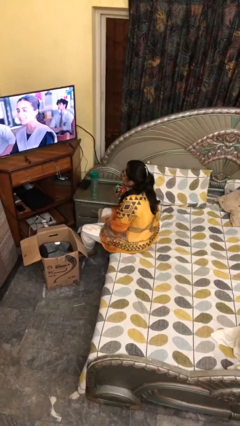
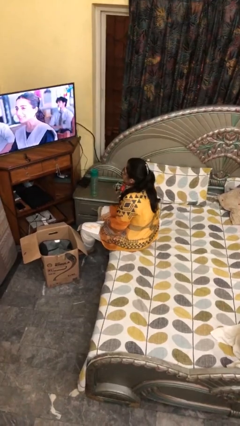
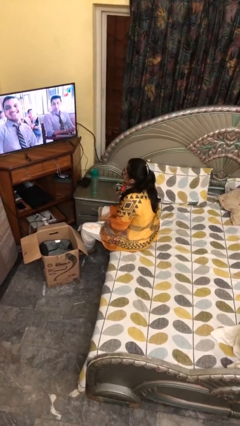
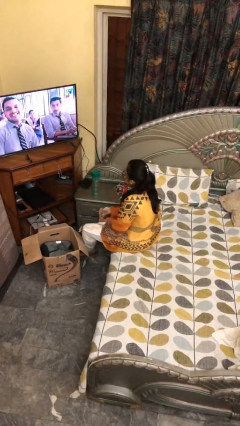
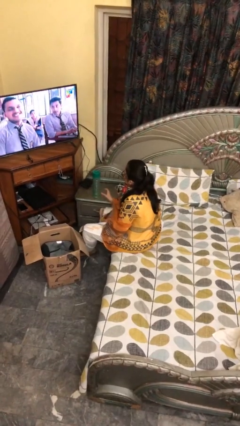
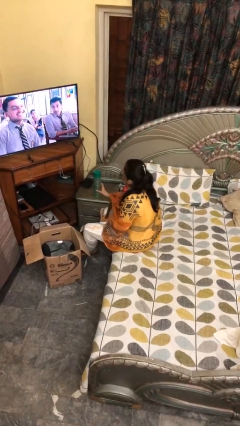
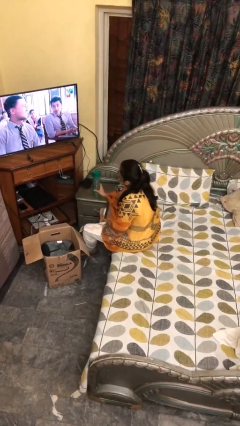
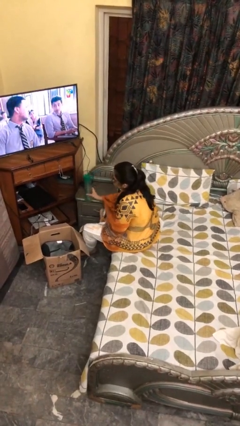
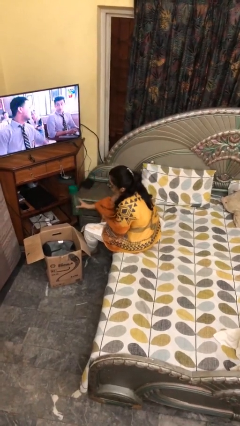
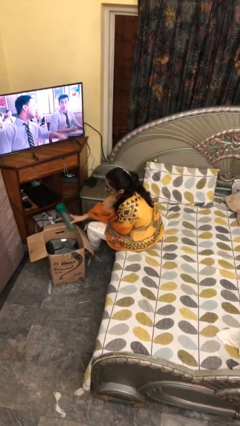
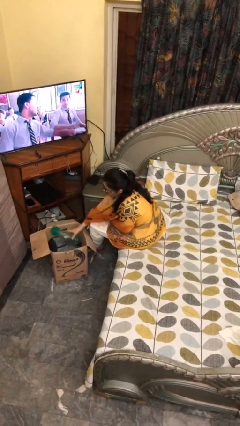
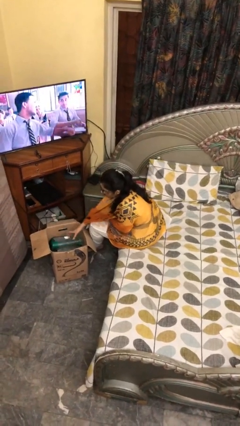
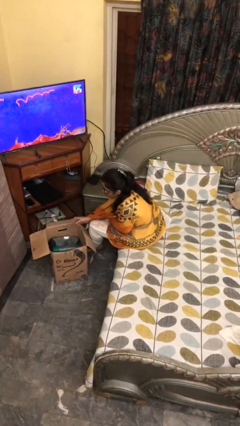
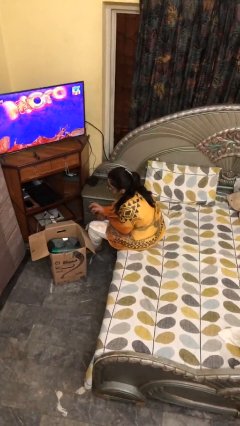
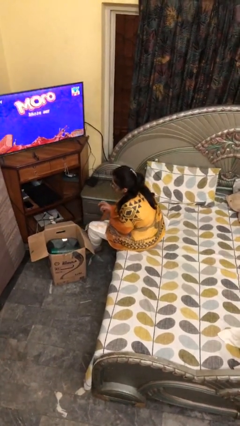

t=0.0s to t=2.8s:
person puts object into box

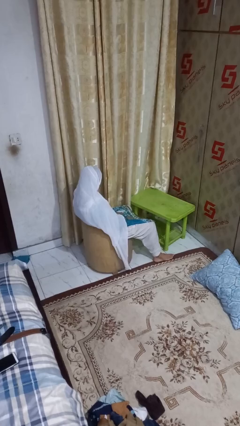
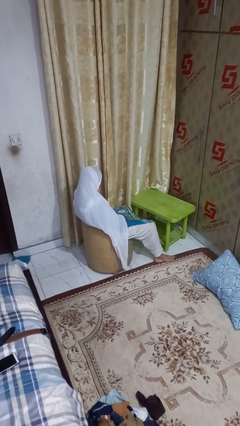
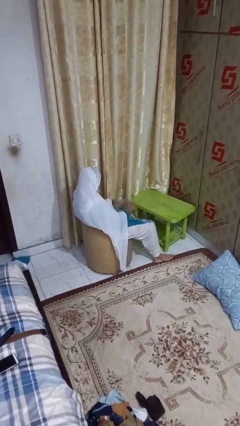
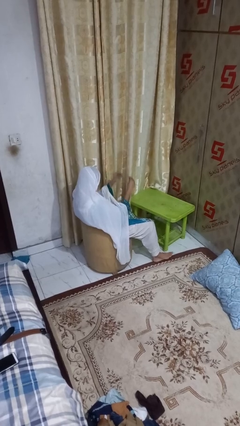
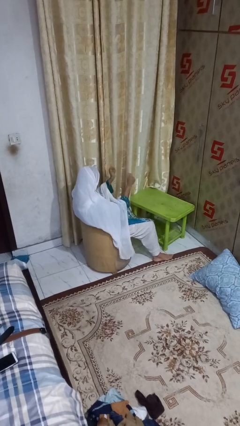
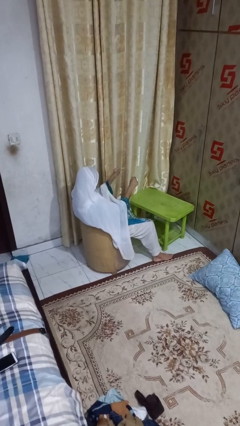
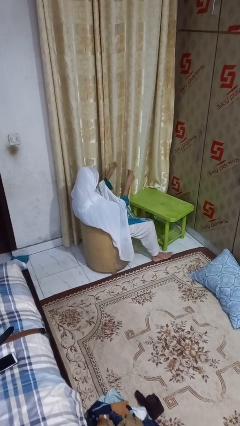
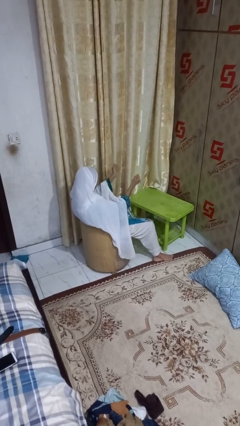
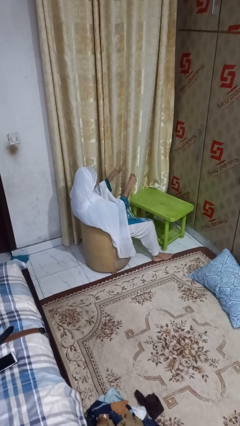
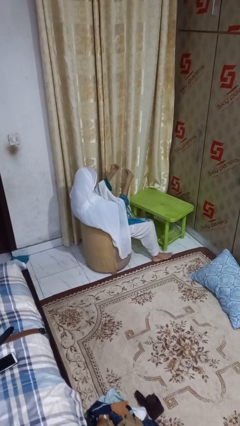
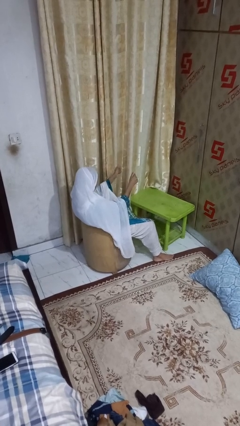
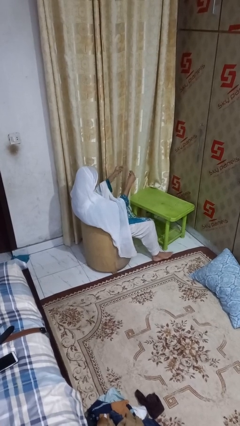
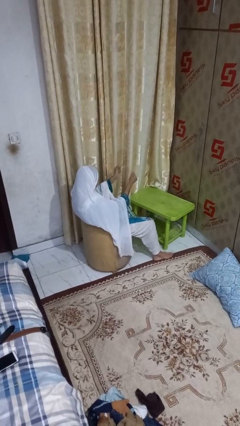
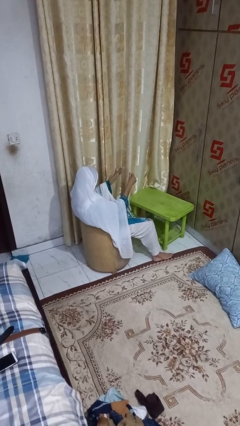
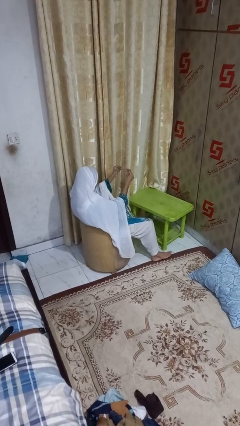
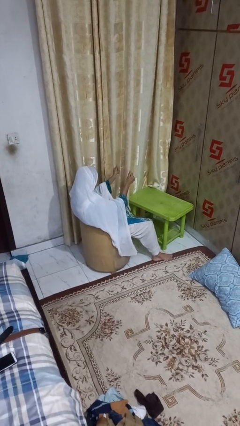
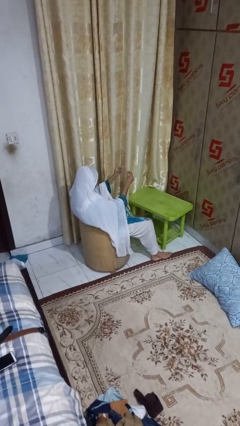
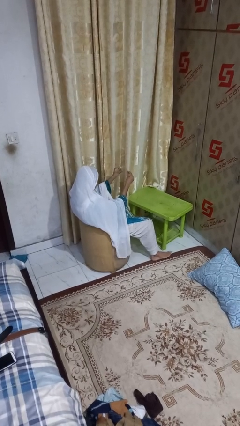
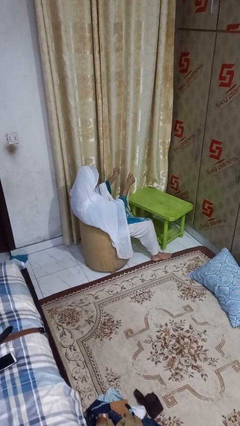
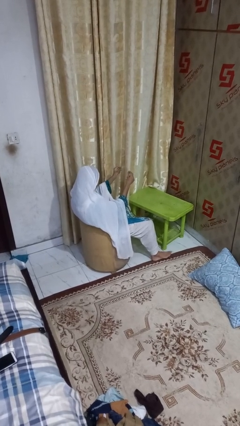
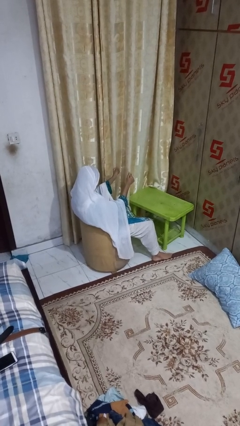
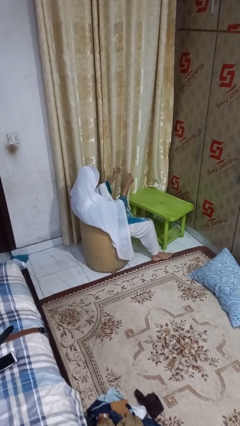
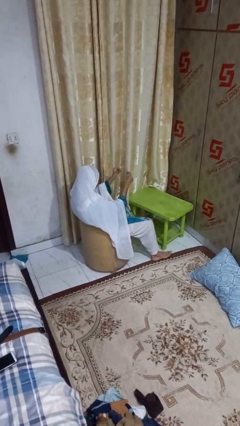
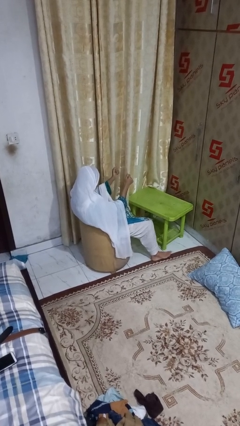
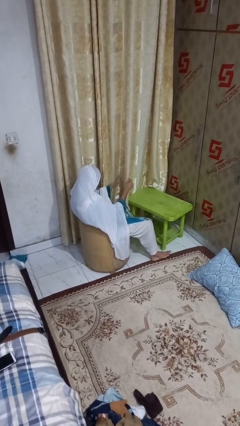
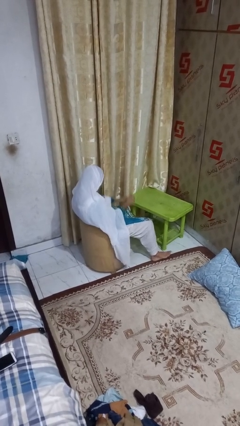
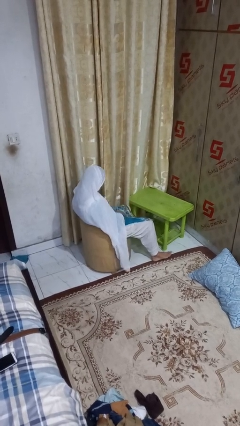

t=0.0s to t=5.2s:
person snaps fingers

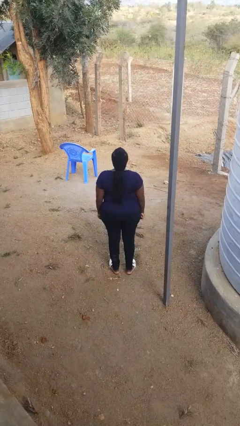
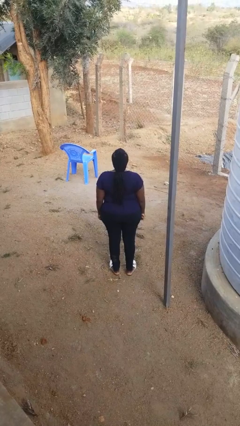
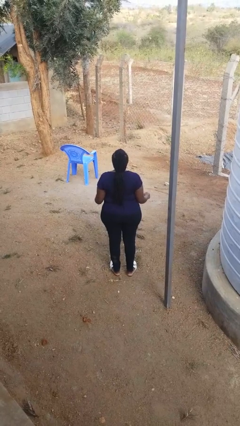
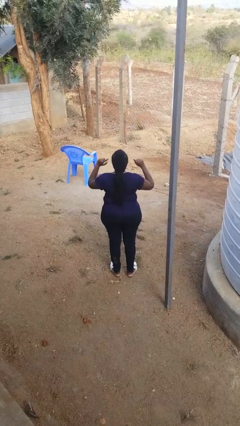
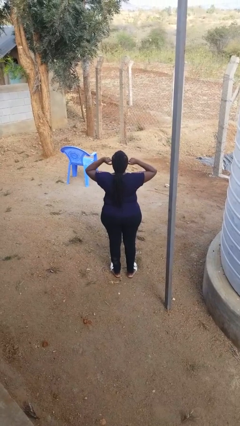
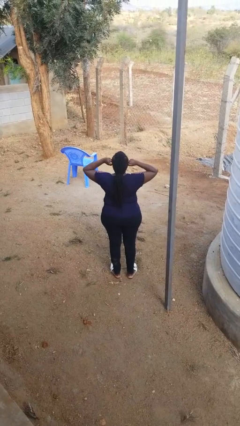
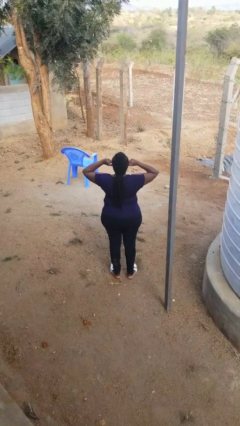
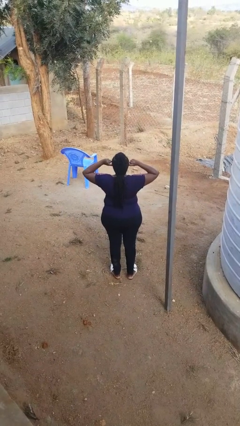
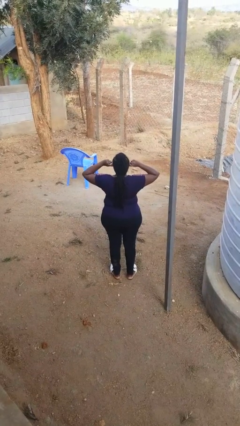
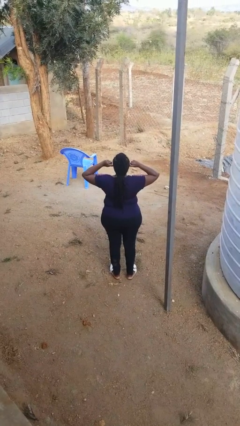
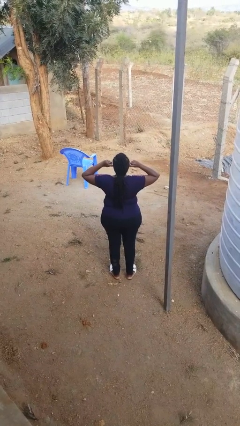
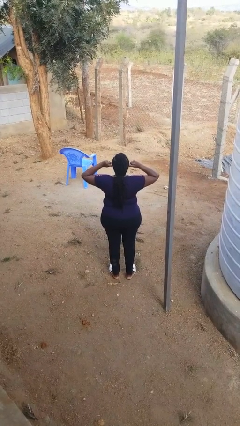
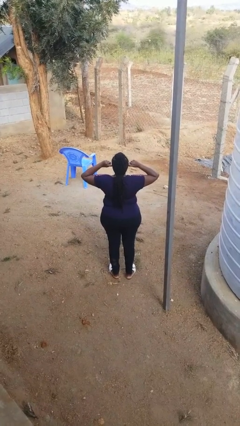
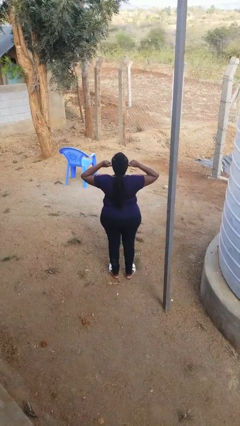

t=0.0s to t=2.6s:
person puts fingers in ear

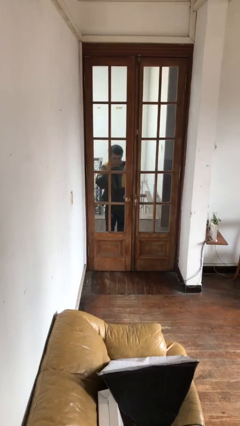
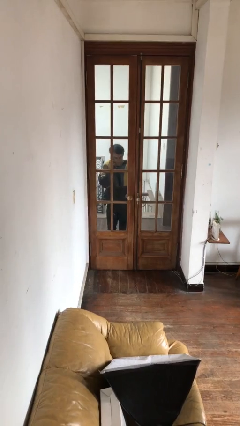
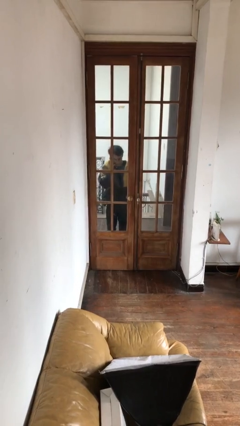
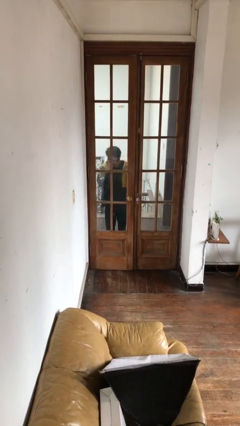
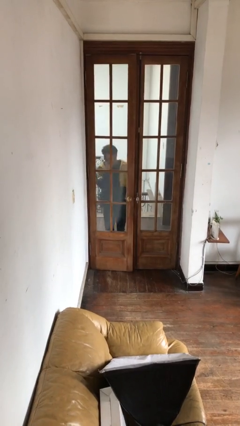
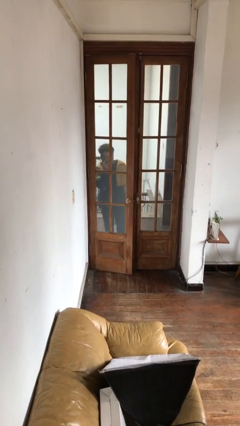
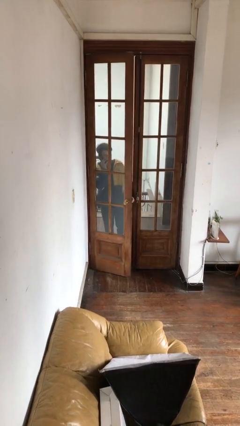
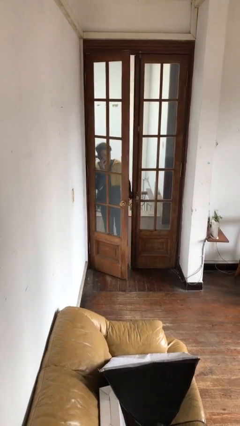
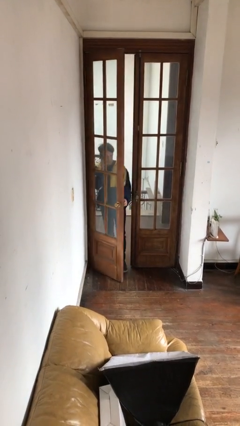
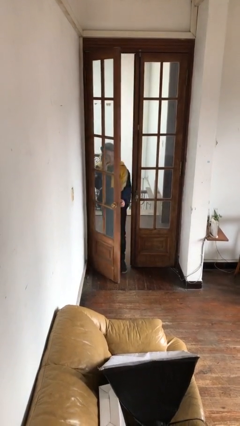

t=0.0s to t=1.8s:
person opens facility door

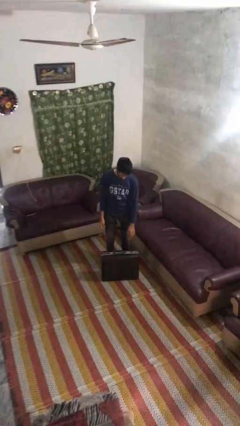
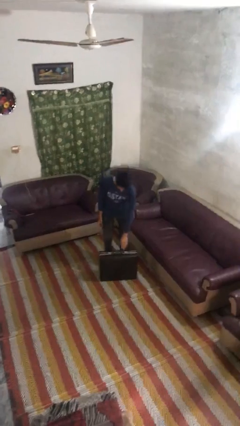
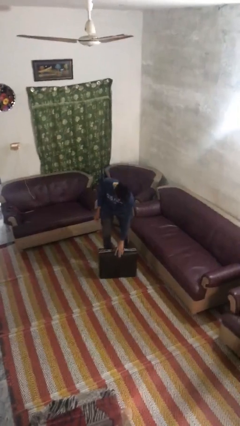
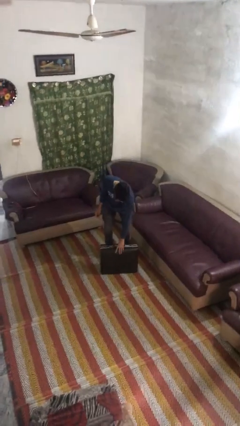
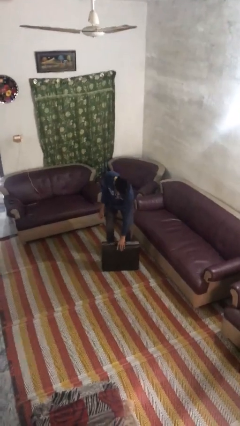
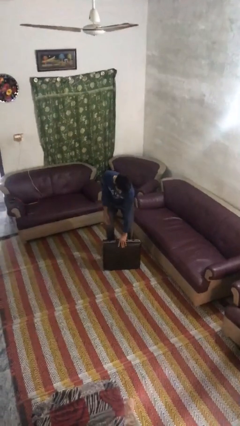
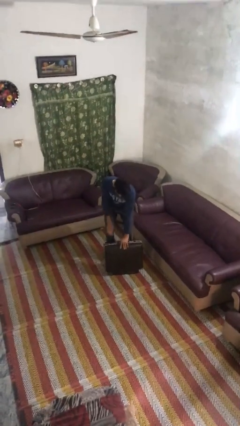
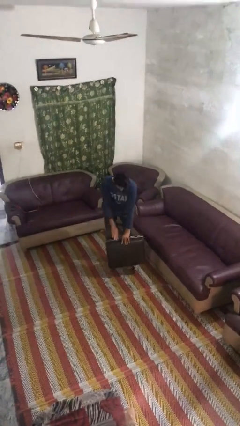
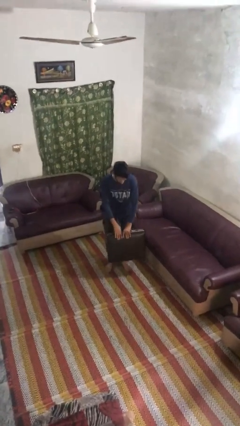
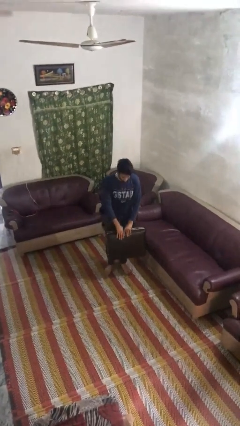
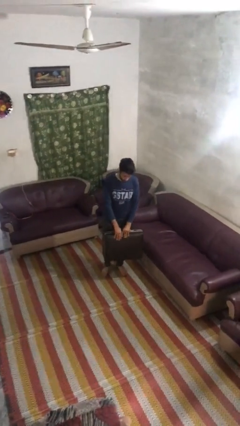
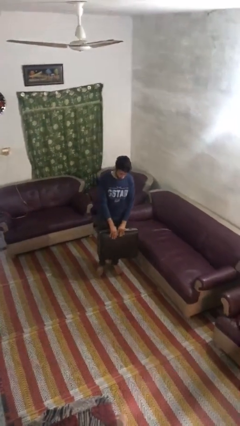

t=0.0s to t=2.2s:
person picks up object from floor

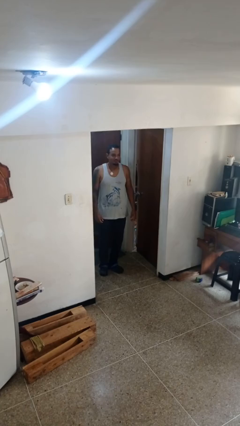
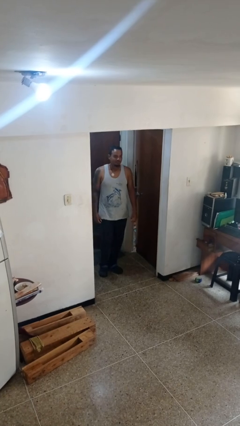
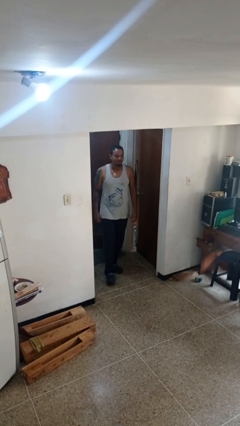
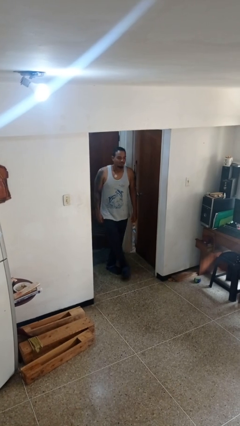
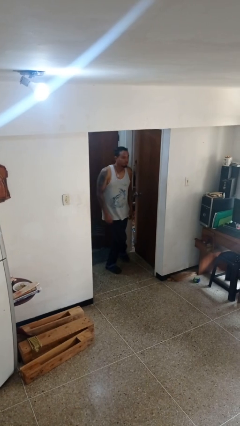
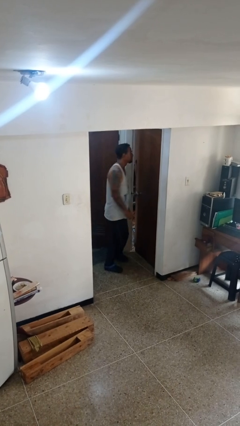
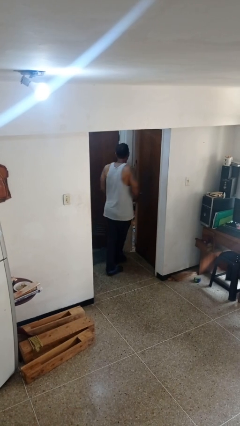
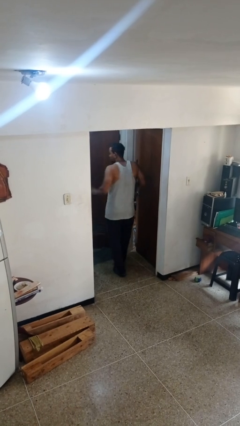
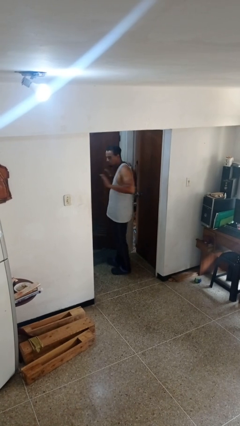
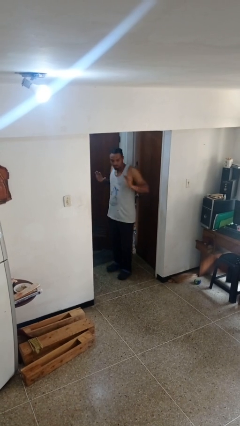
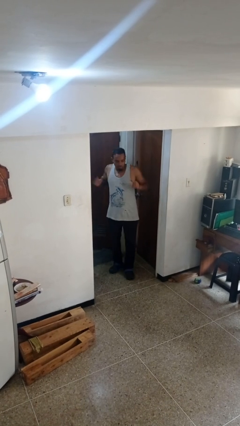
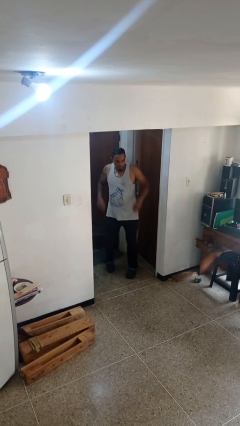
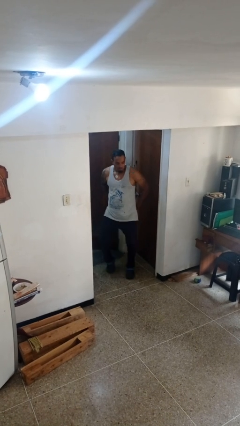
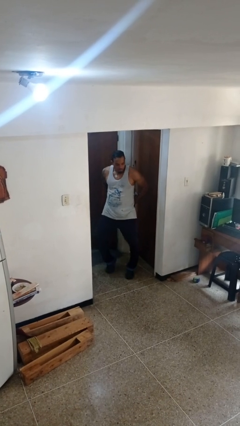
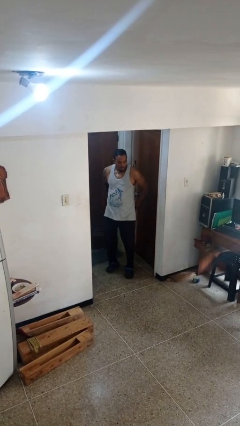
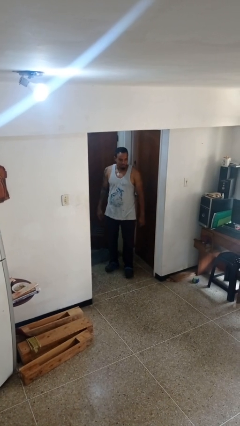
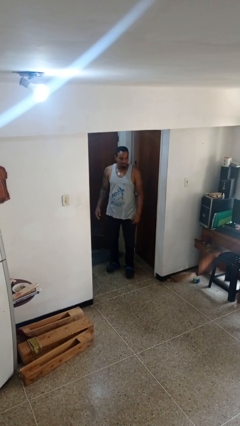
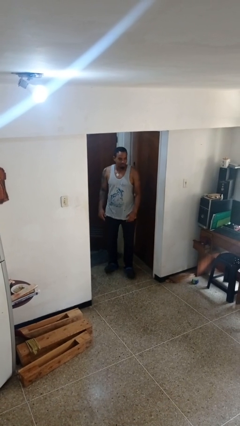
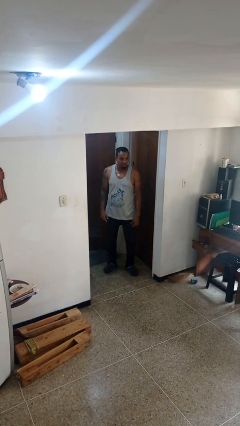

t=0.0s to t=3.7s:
person twirls
